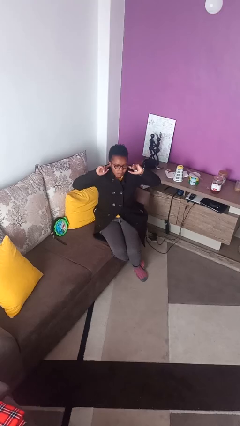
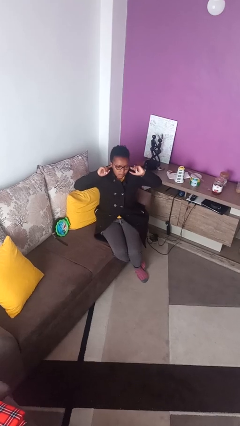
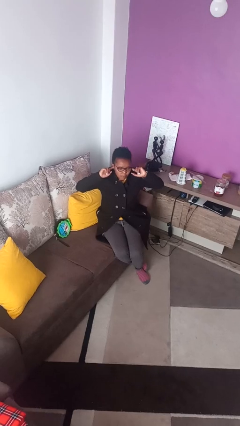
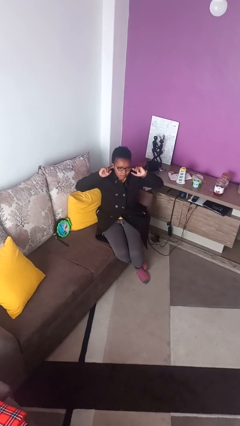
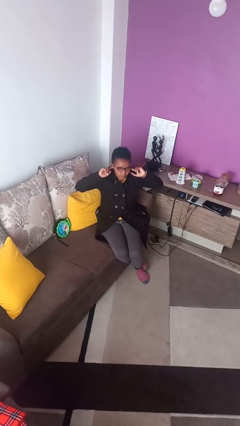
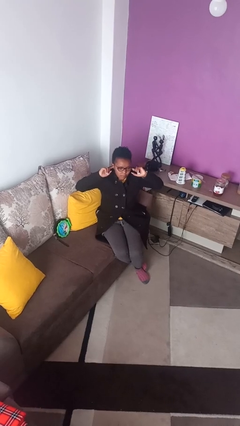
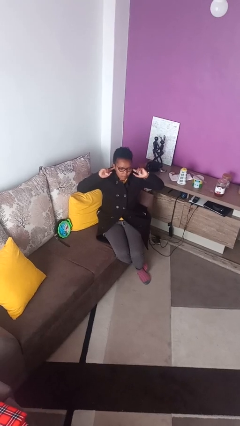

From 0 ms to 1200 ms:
person puts fingers in ear

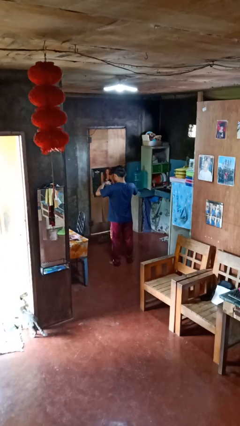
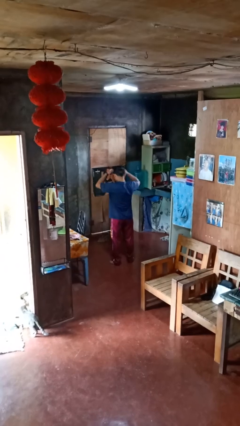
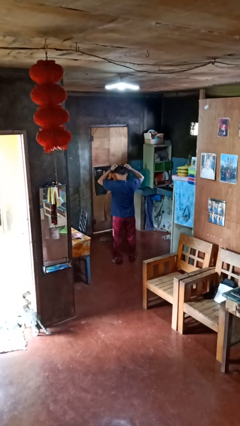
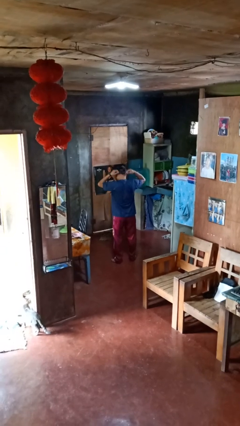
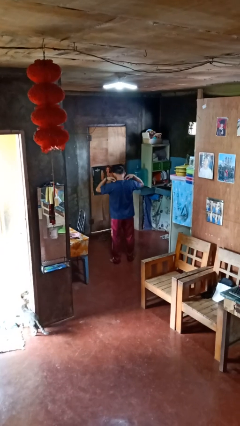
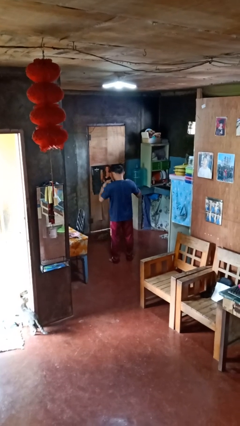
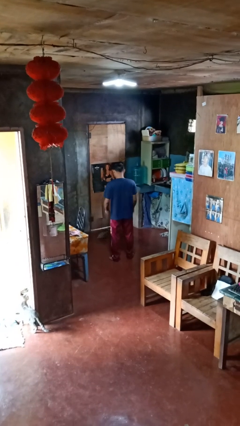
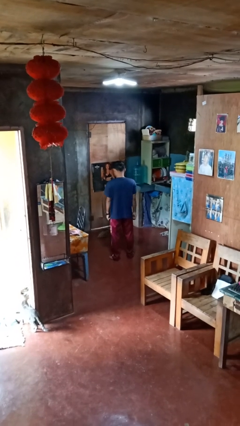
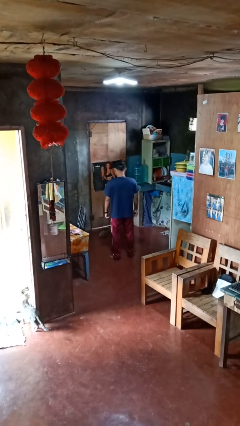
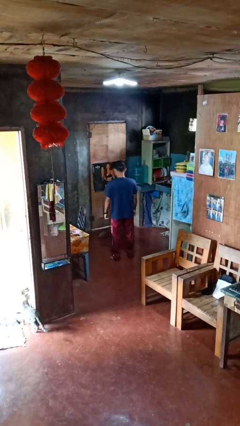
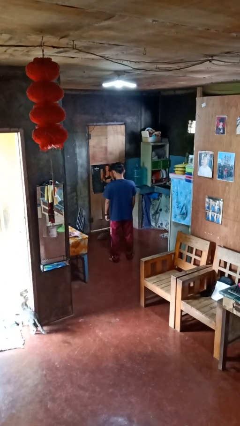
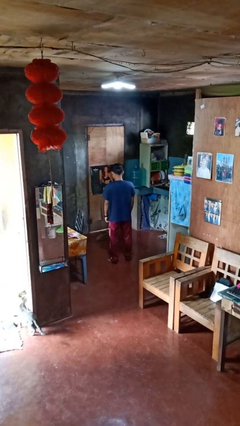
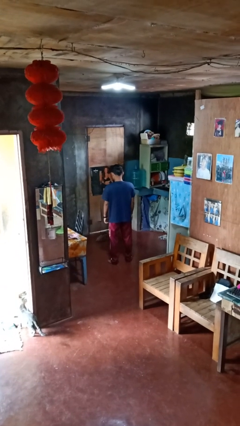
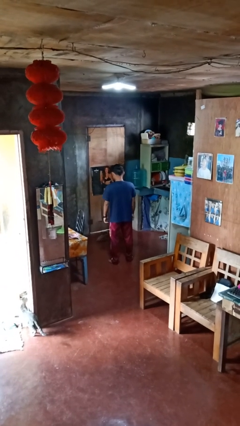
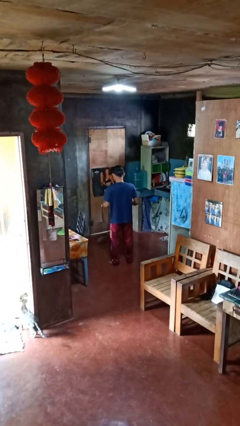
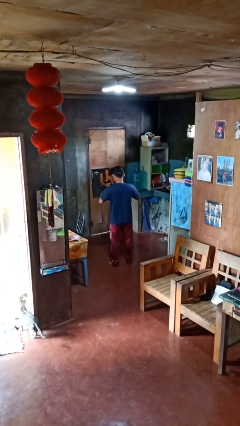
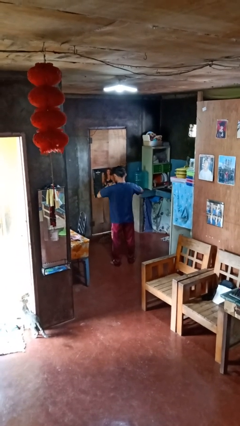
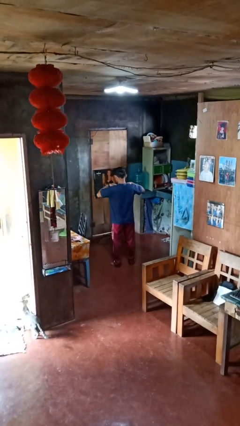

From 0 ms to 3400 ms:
person puts on necklace

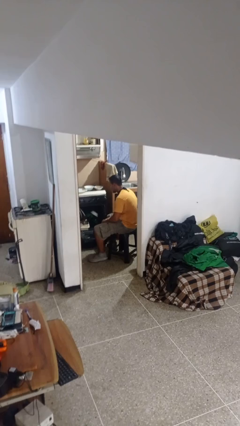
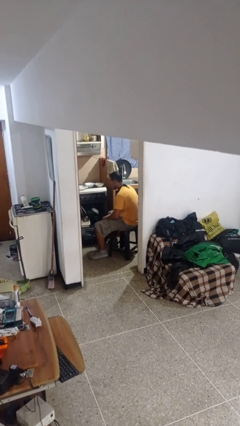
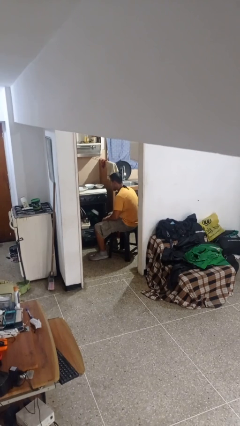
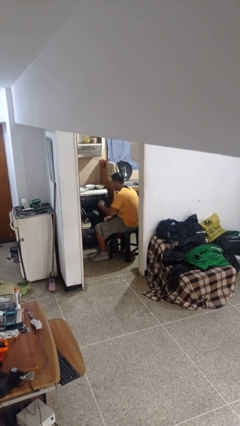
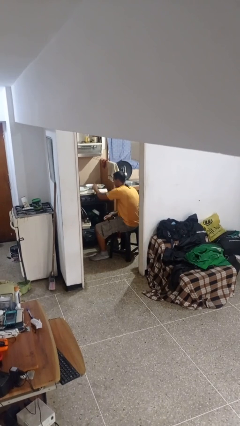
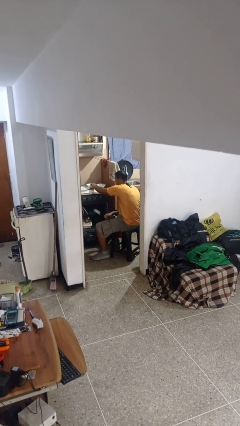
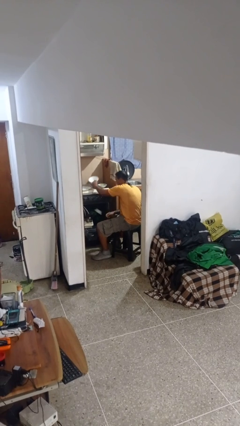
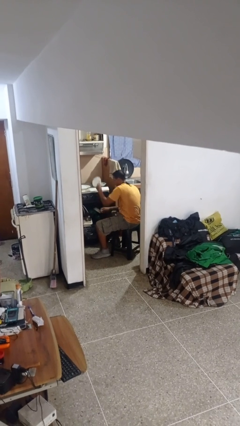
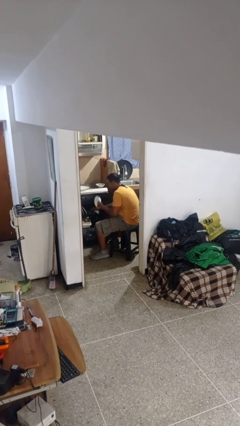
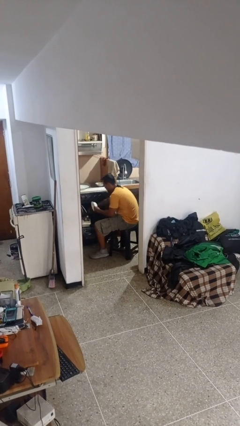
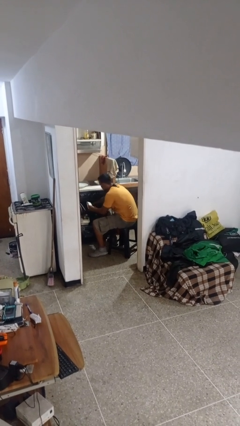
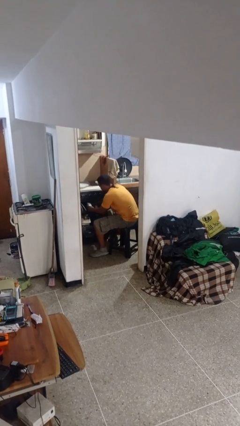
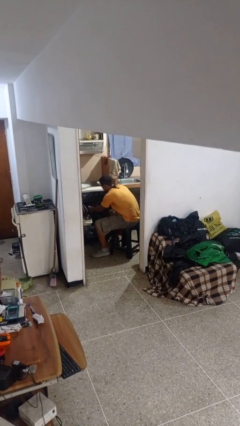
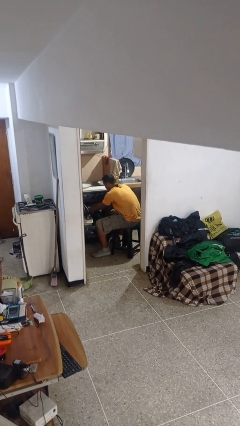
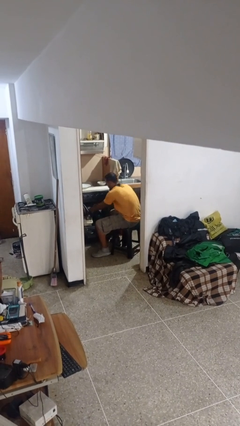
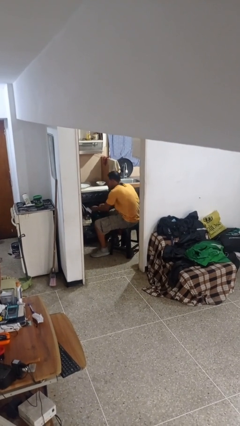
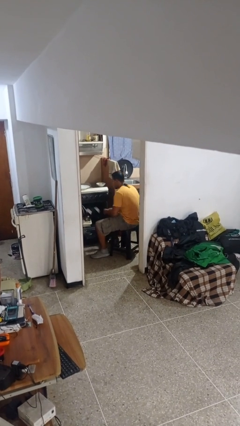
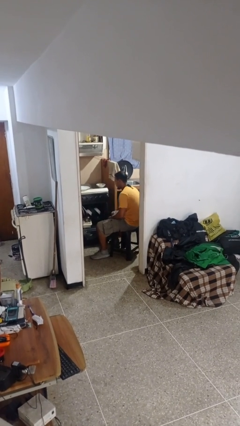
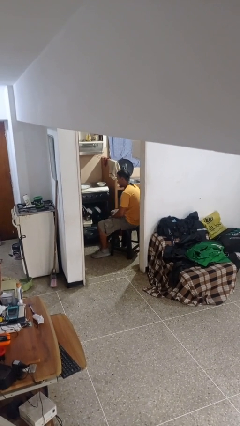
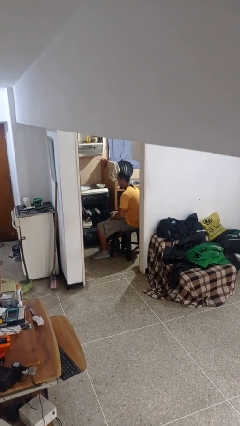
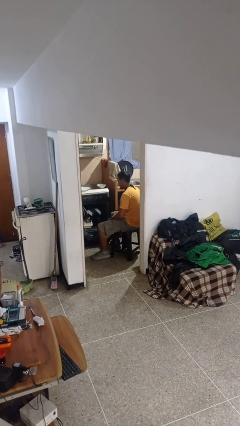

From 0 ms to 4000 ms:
person loads dishwasher

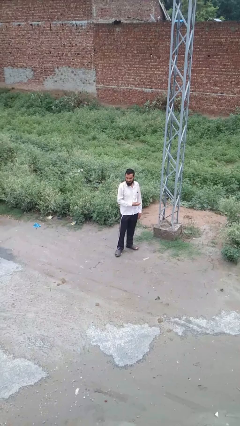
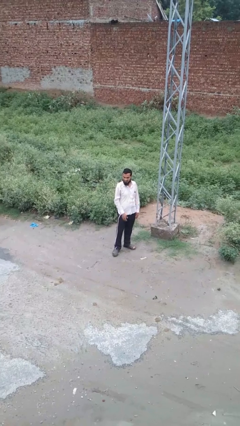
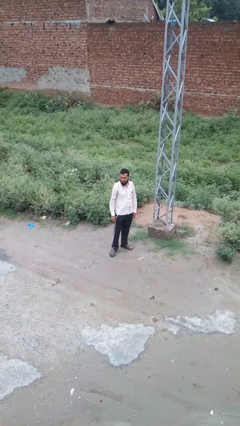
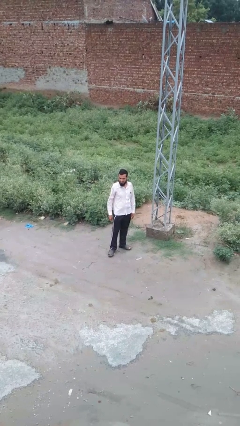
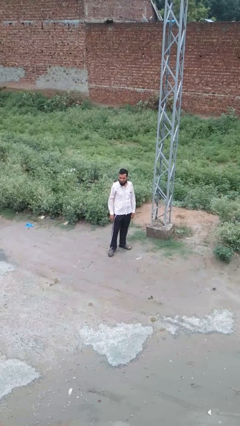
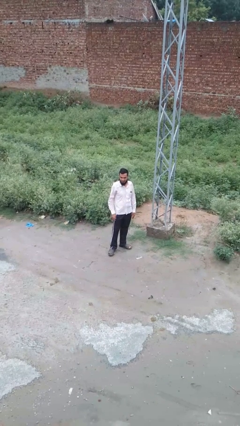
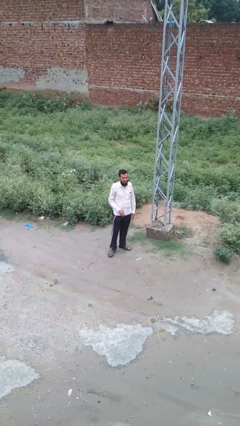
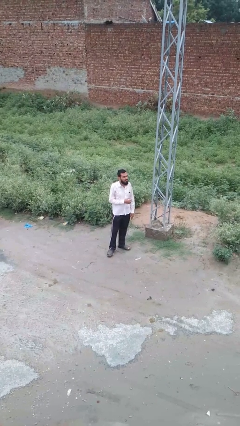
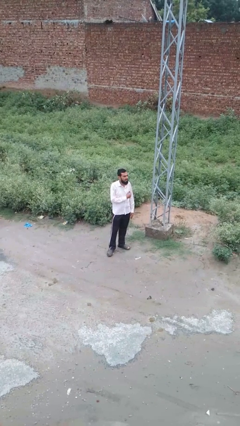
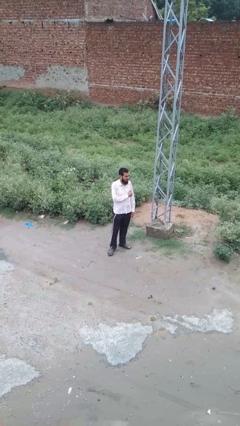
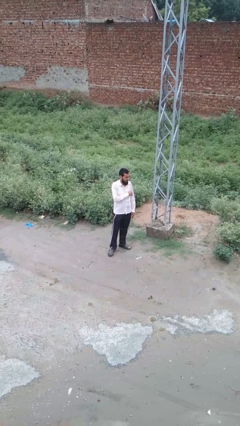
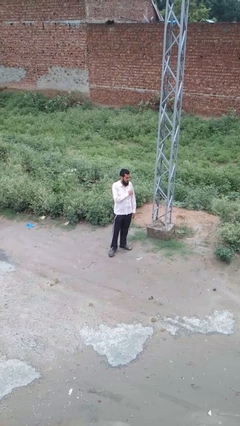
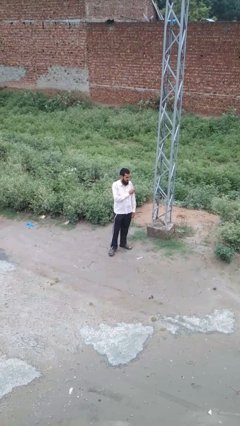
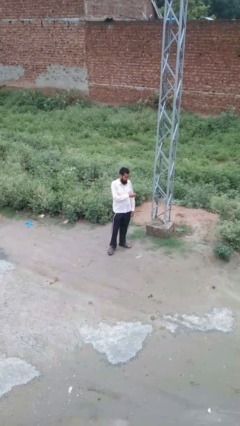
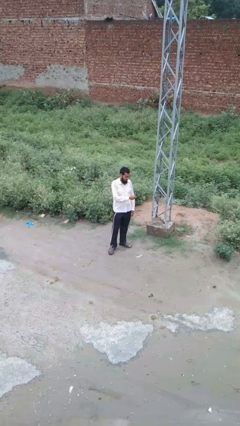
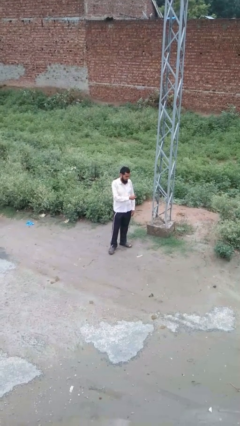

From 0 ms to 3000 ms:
person takes phone from pocket

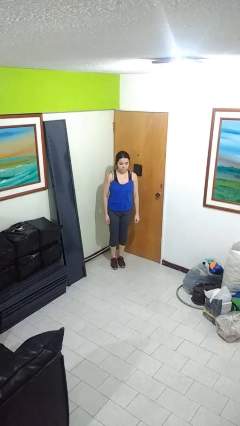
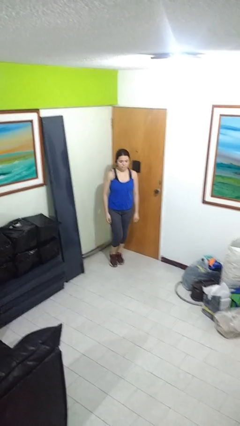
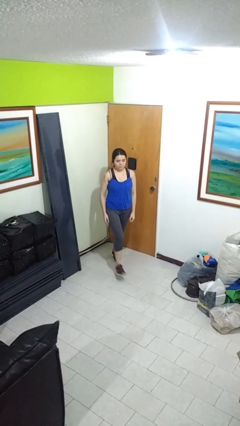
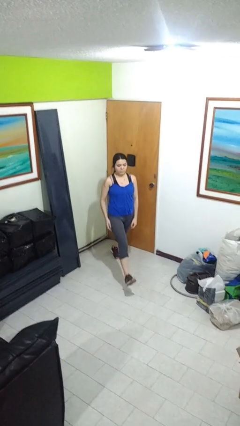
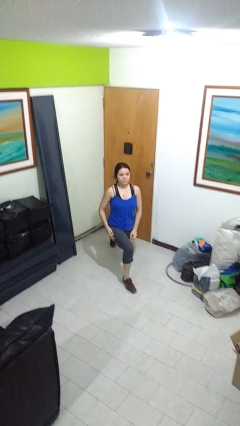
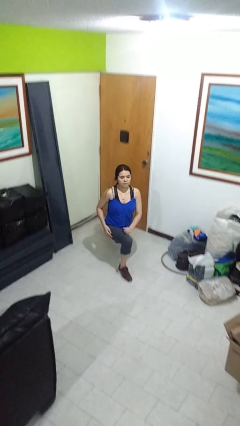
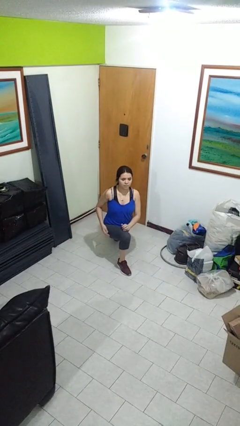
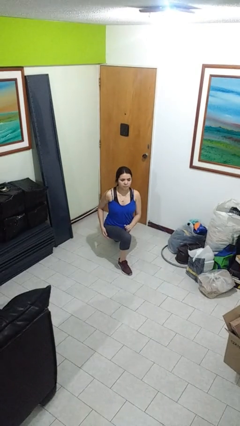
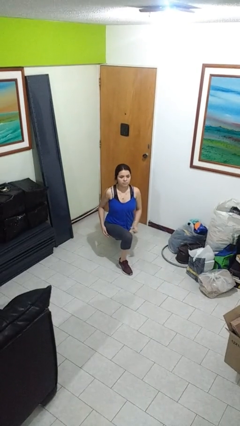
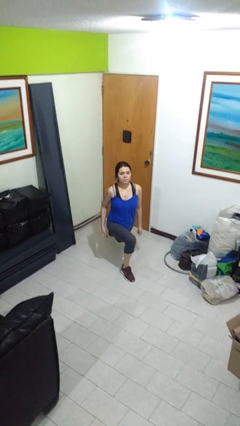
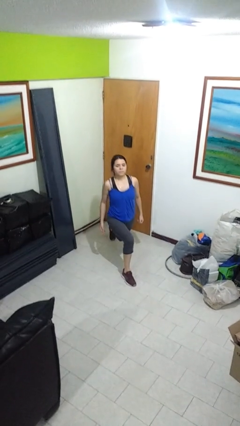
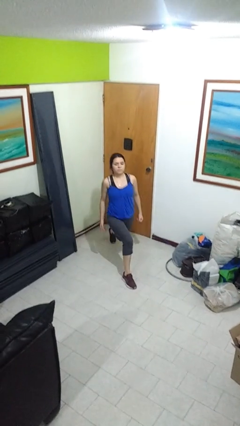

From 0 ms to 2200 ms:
person exercises with lunges

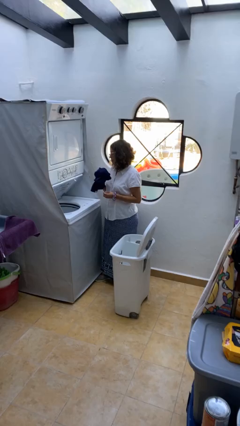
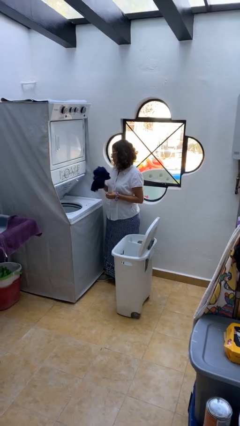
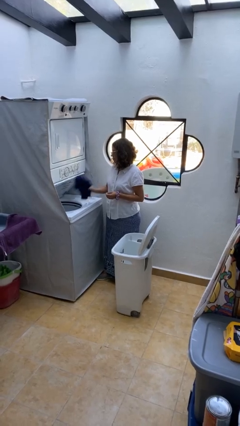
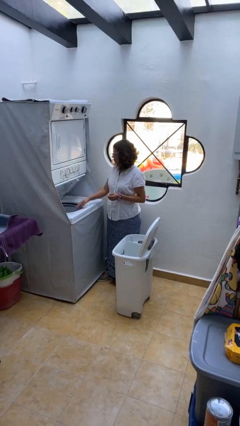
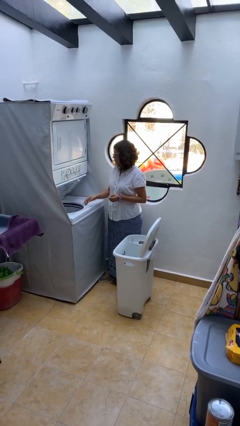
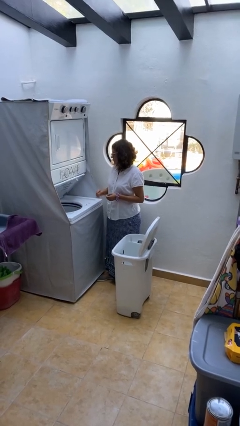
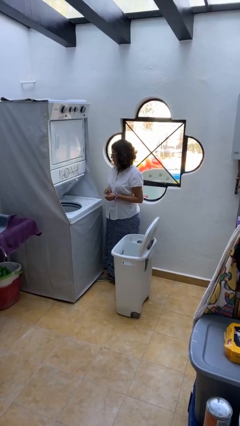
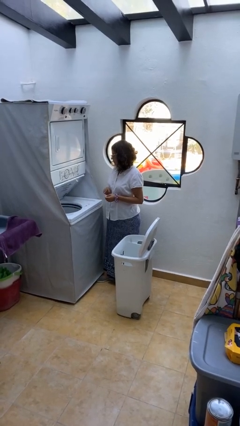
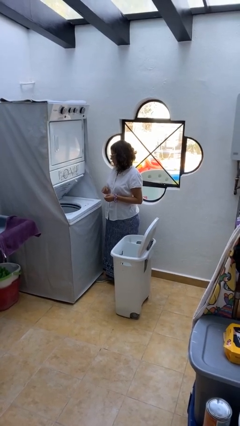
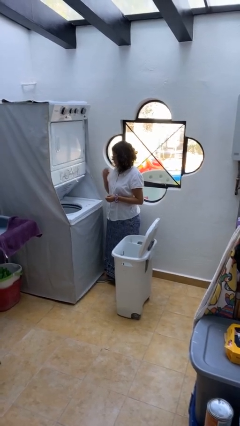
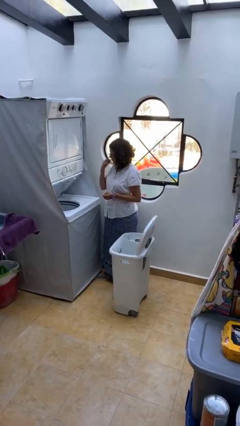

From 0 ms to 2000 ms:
person loads clotheswasher

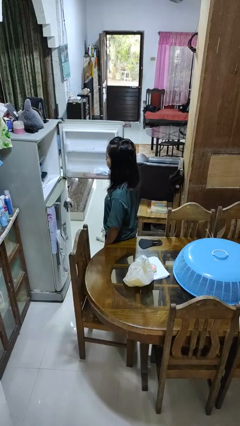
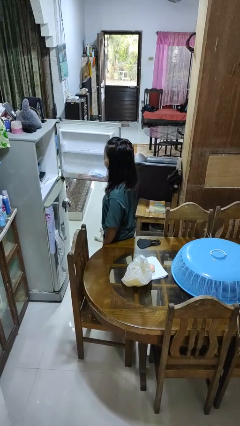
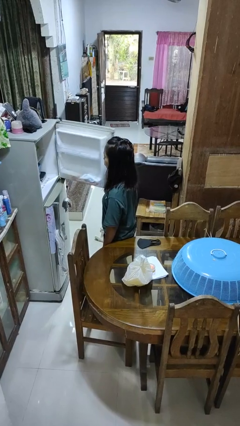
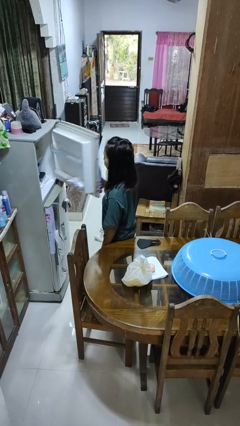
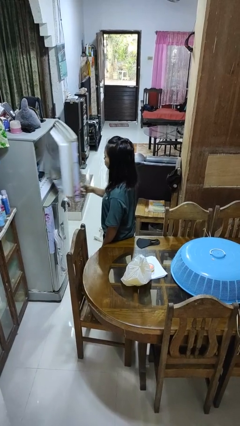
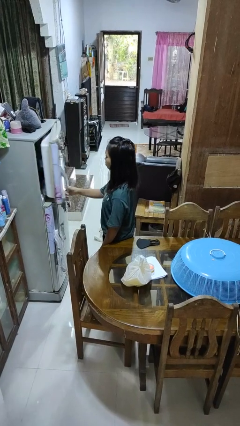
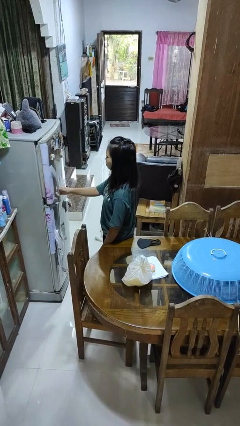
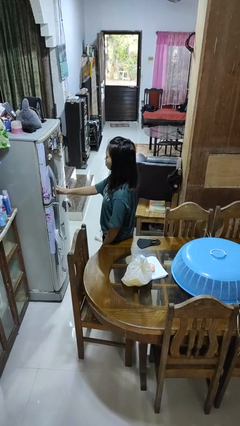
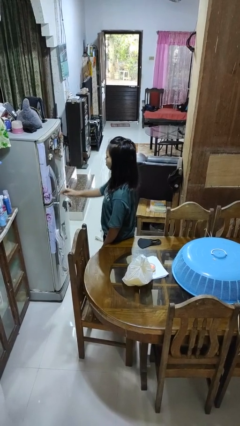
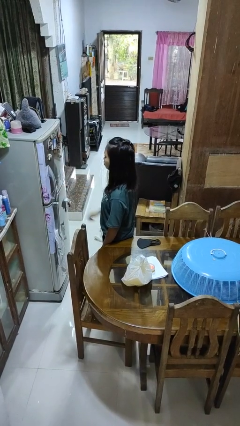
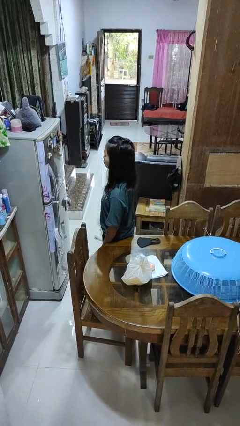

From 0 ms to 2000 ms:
person closes refrigerator
